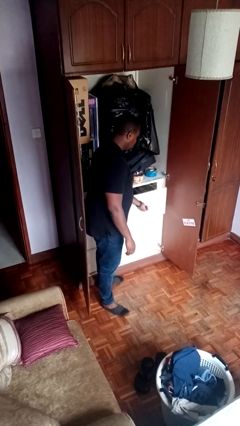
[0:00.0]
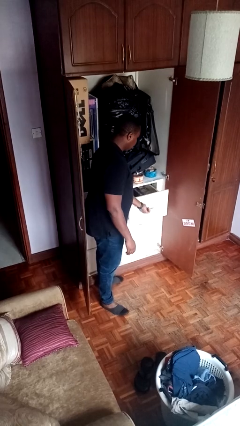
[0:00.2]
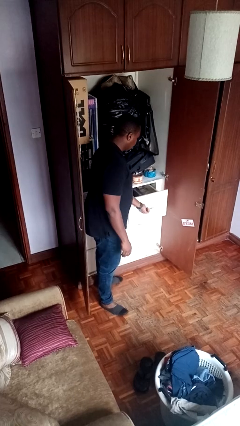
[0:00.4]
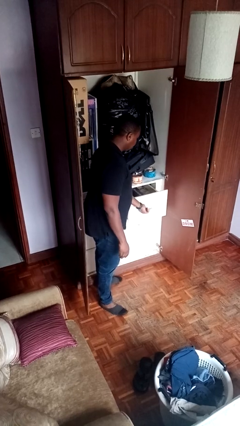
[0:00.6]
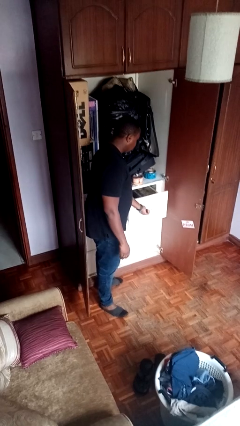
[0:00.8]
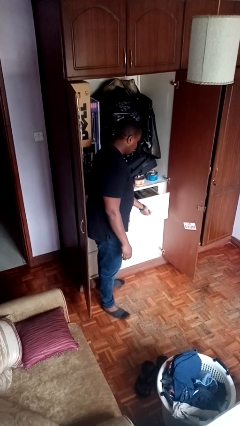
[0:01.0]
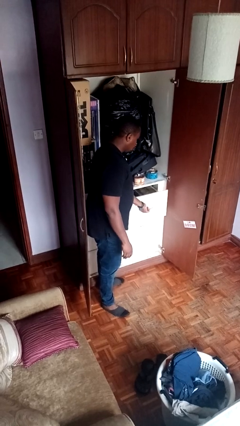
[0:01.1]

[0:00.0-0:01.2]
person opens dresser drawer

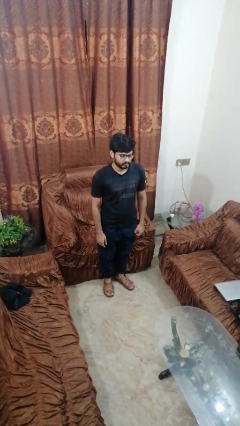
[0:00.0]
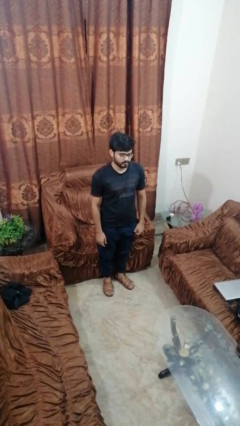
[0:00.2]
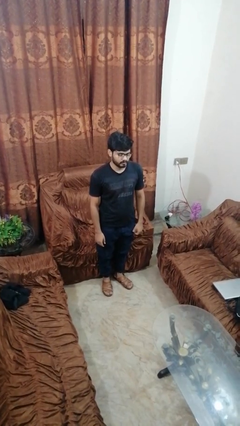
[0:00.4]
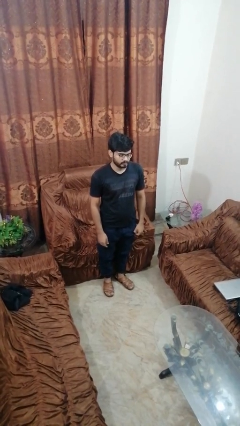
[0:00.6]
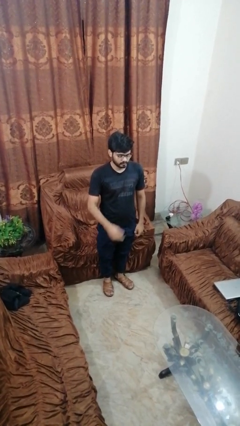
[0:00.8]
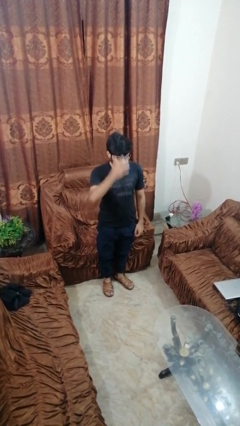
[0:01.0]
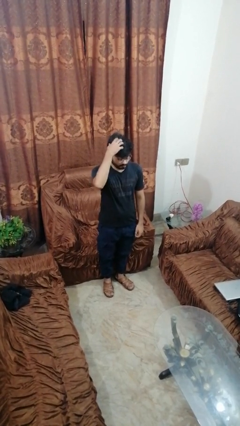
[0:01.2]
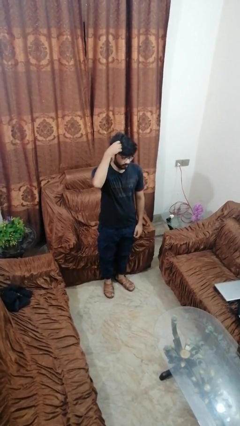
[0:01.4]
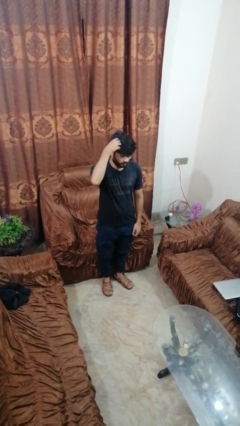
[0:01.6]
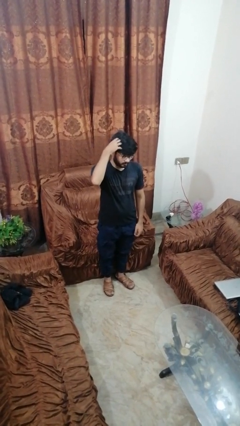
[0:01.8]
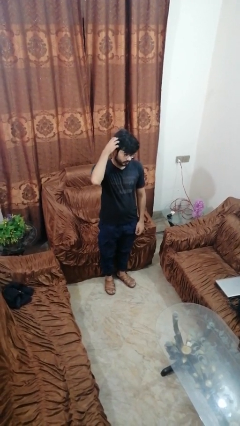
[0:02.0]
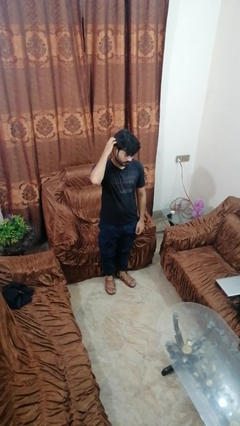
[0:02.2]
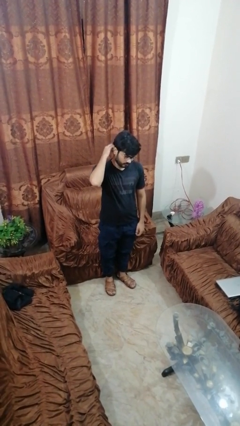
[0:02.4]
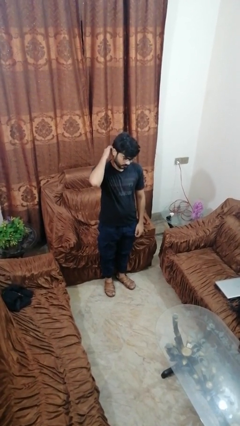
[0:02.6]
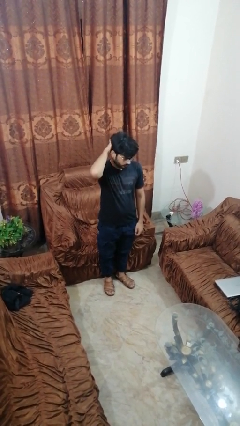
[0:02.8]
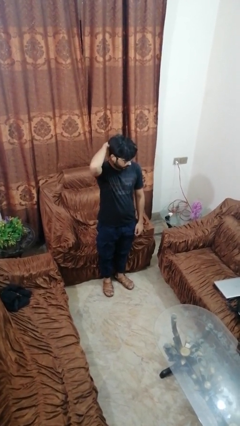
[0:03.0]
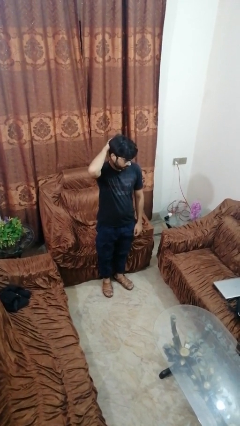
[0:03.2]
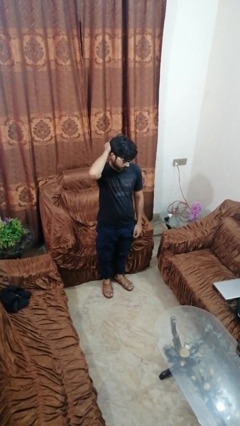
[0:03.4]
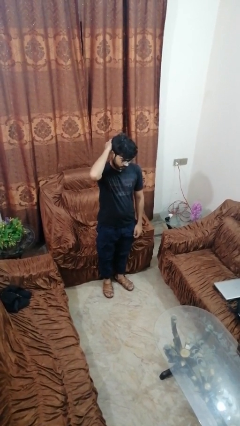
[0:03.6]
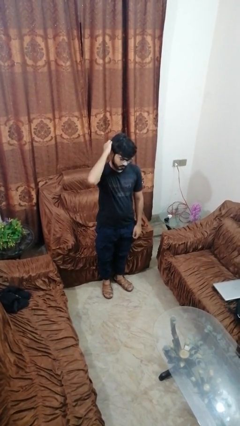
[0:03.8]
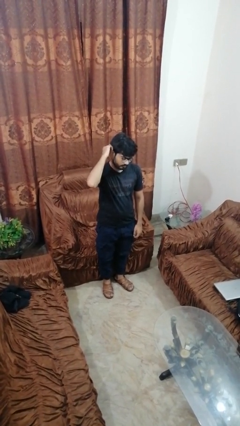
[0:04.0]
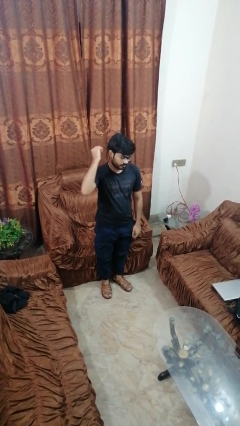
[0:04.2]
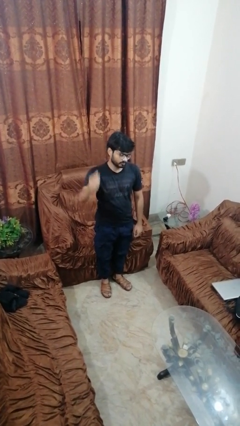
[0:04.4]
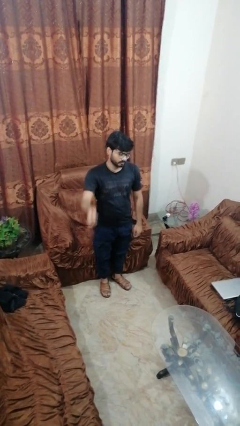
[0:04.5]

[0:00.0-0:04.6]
person scratches face

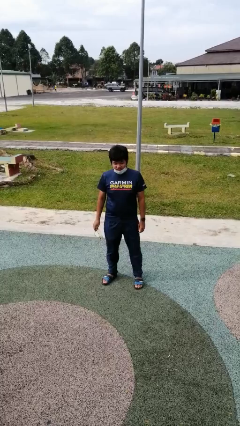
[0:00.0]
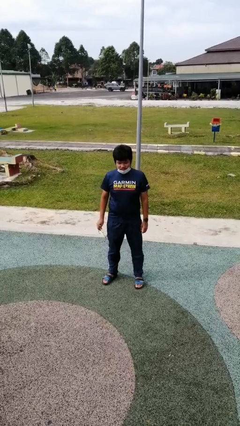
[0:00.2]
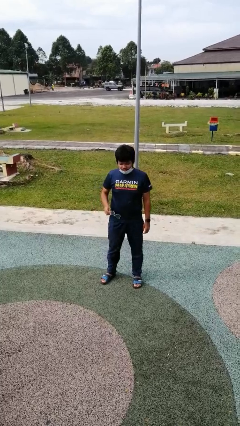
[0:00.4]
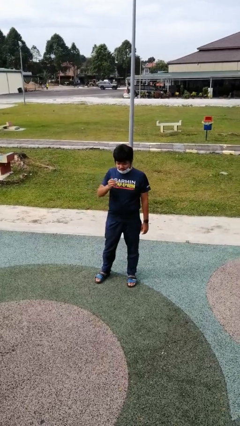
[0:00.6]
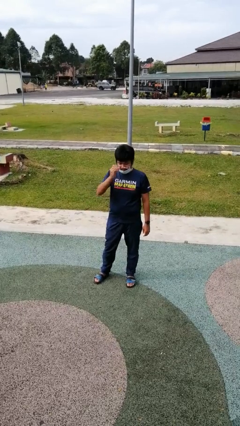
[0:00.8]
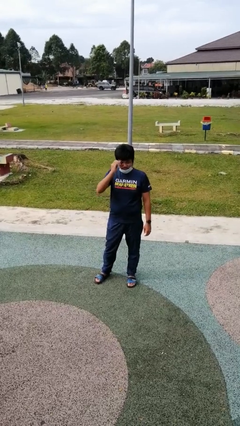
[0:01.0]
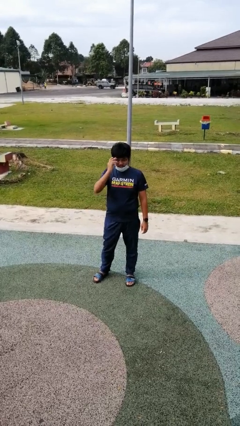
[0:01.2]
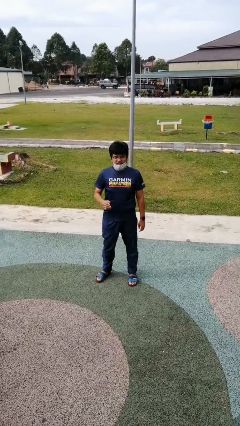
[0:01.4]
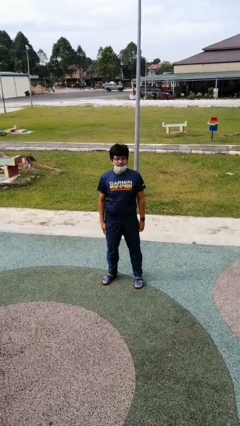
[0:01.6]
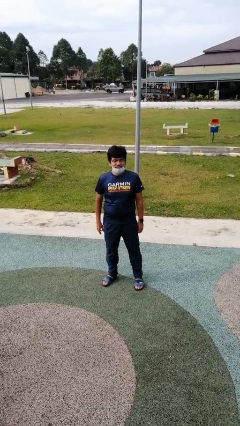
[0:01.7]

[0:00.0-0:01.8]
person puts on glasses

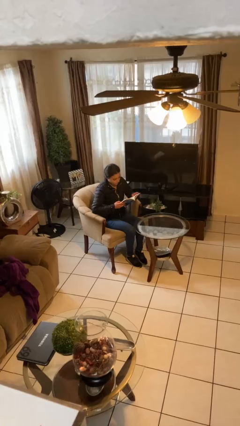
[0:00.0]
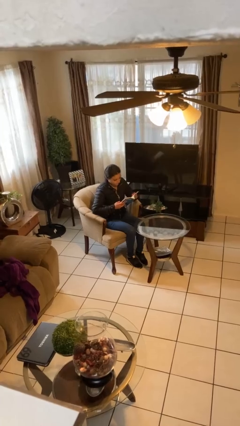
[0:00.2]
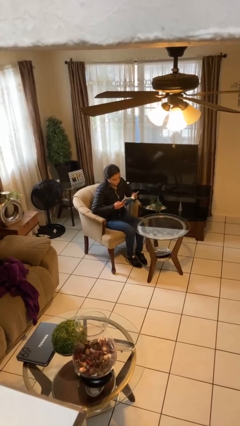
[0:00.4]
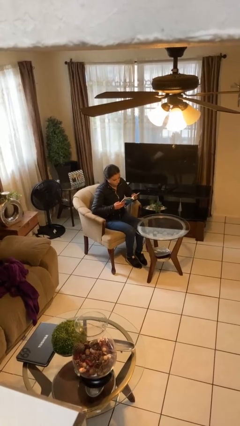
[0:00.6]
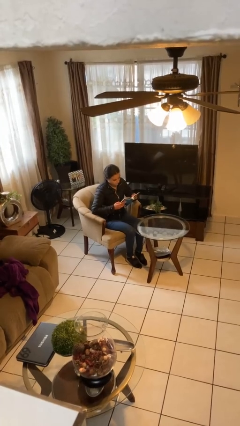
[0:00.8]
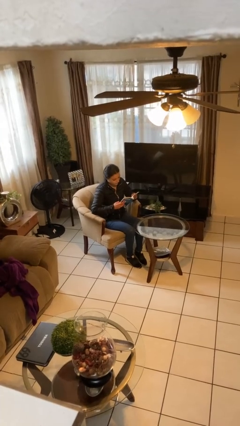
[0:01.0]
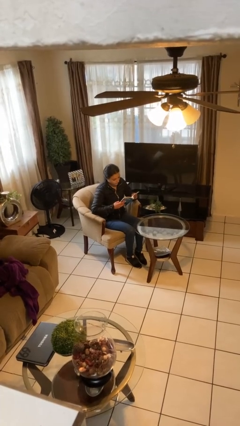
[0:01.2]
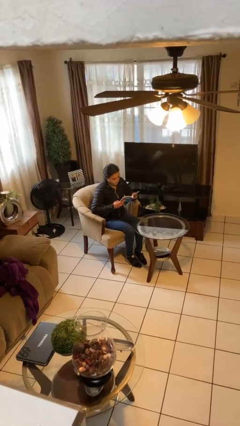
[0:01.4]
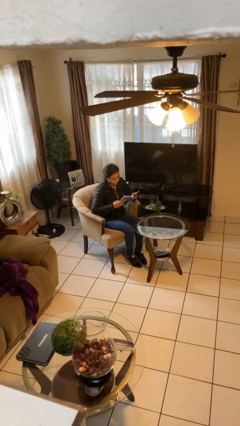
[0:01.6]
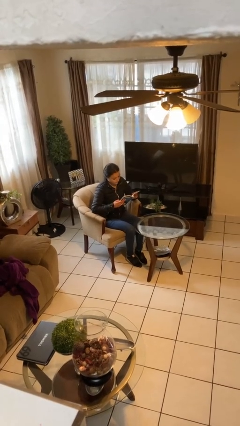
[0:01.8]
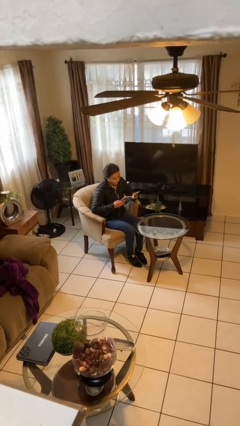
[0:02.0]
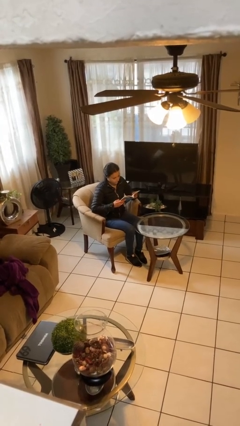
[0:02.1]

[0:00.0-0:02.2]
person reads document

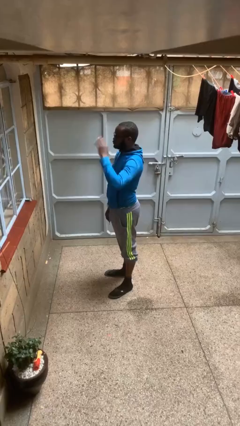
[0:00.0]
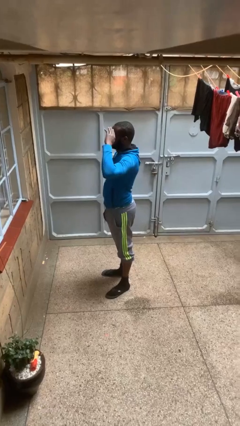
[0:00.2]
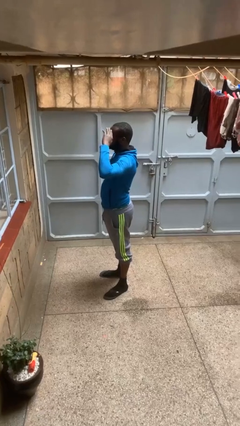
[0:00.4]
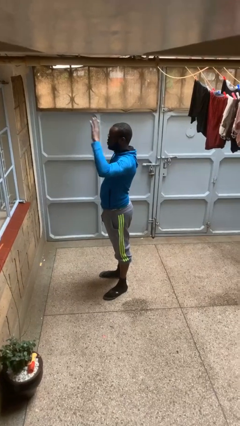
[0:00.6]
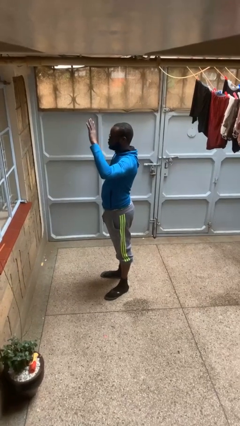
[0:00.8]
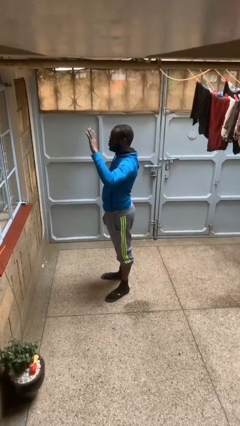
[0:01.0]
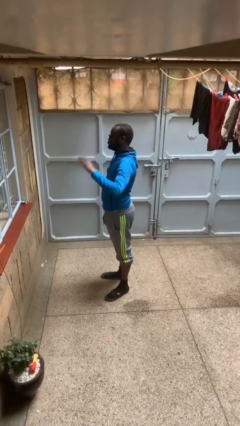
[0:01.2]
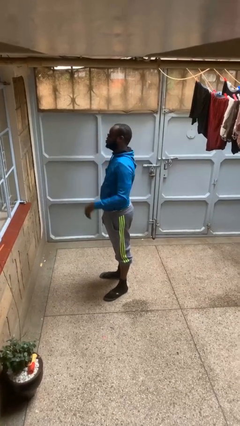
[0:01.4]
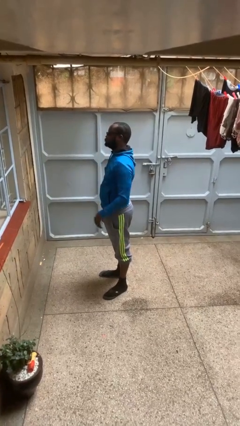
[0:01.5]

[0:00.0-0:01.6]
person salutes

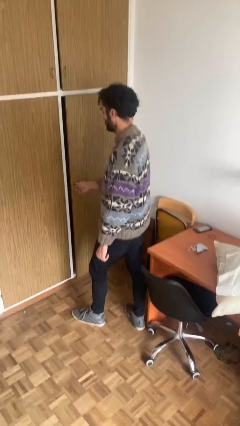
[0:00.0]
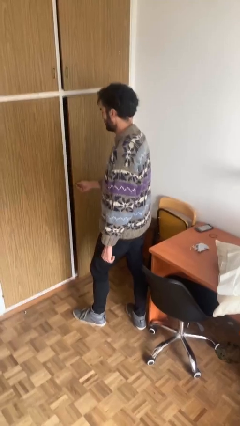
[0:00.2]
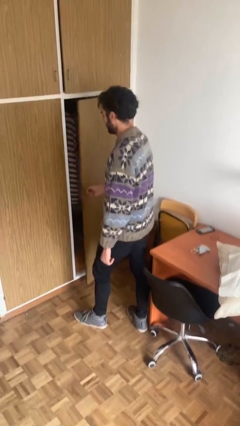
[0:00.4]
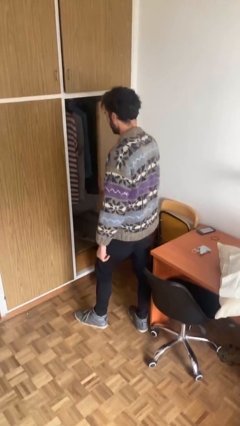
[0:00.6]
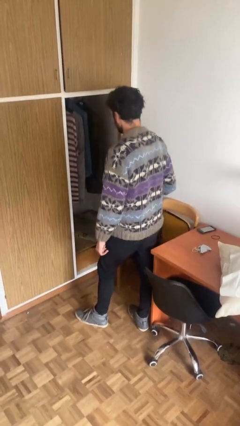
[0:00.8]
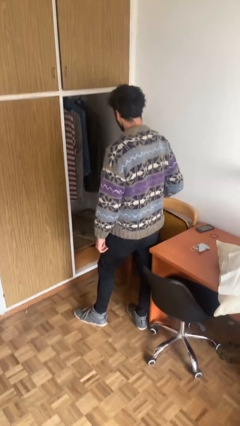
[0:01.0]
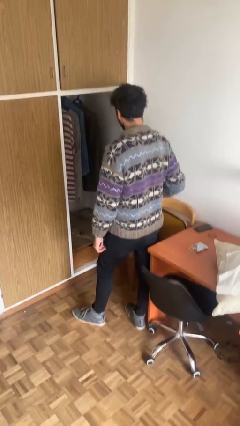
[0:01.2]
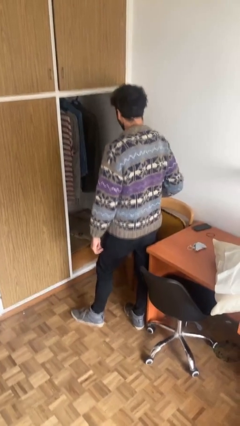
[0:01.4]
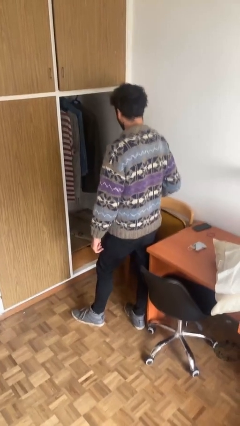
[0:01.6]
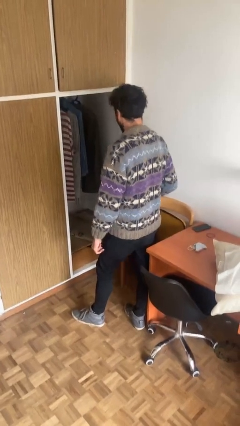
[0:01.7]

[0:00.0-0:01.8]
person opens closet door

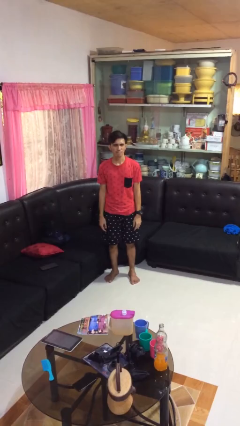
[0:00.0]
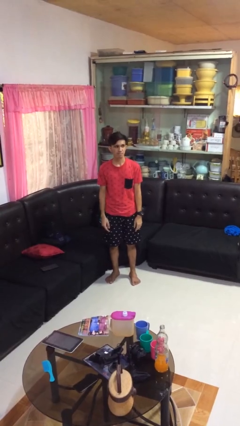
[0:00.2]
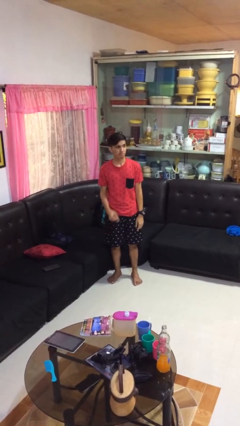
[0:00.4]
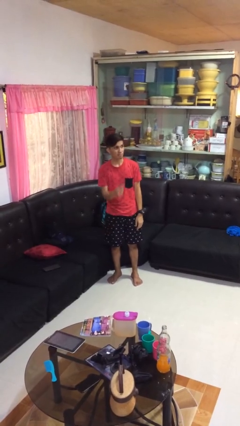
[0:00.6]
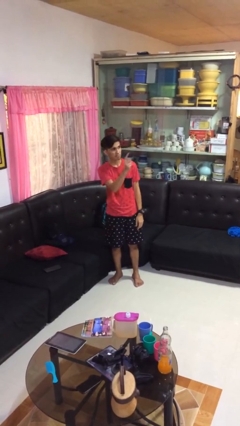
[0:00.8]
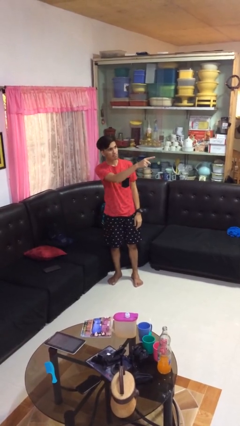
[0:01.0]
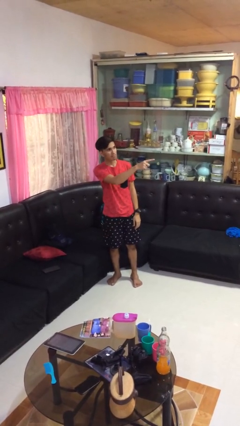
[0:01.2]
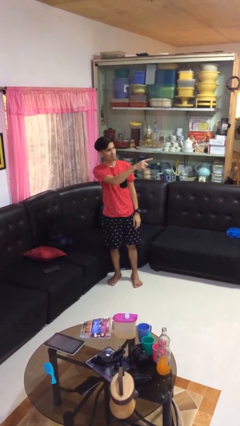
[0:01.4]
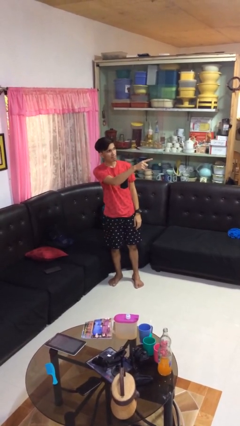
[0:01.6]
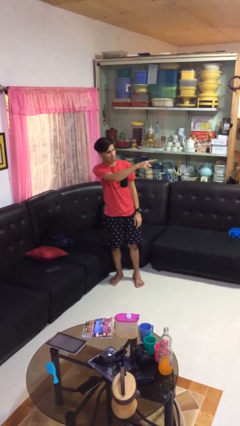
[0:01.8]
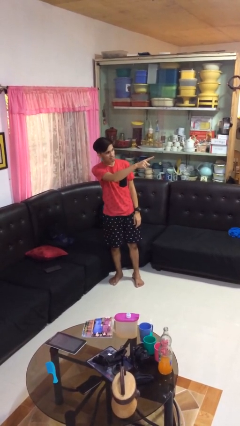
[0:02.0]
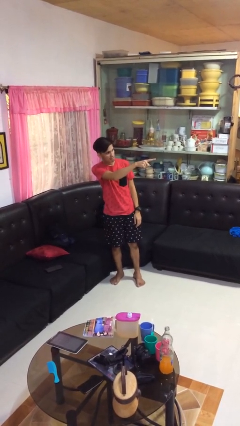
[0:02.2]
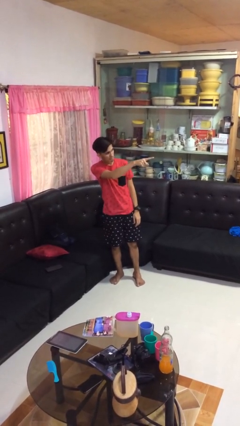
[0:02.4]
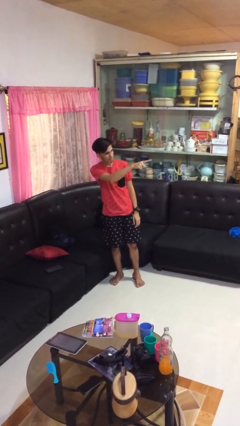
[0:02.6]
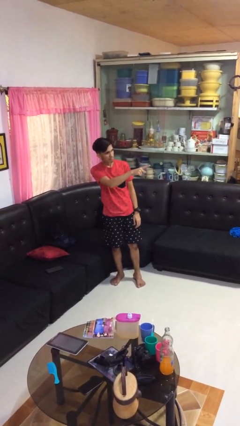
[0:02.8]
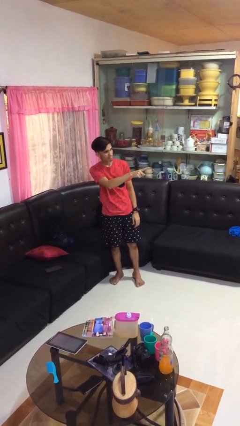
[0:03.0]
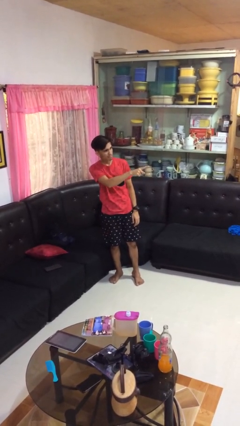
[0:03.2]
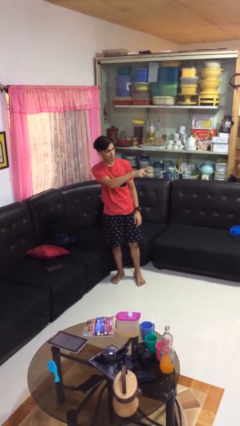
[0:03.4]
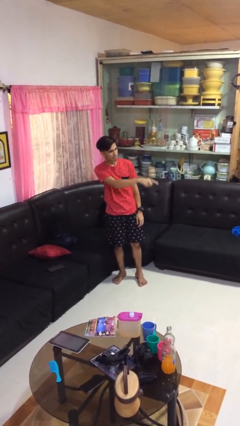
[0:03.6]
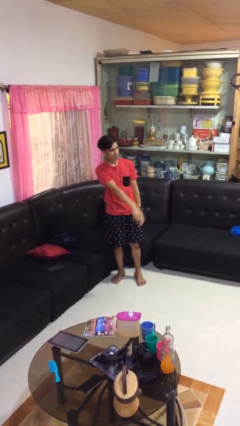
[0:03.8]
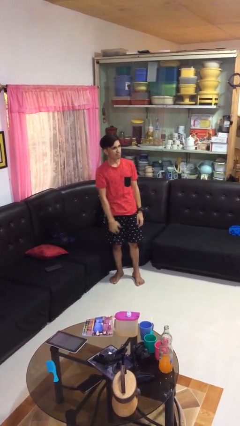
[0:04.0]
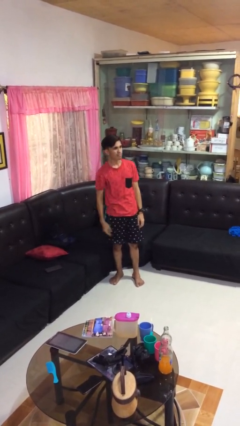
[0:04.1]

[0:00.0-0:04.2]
person points at person
